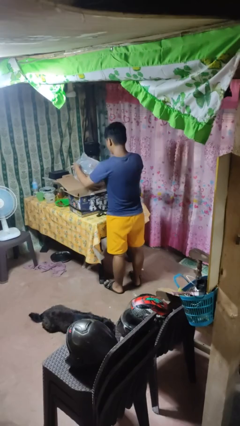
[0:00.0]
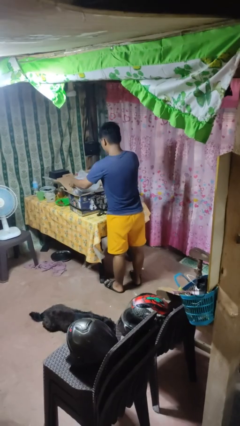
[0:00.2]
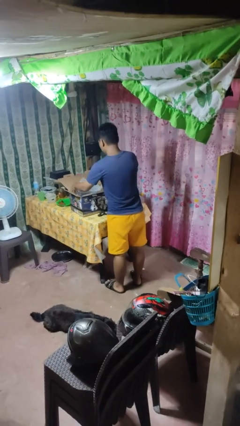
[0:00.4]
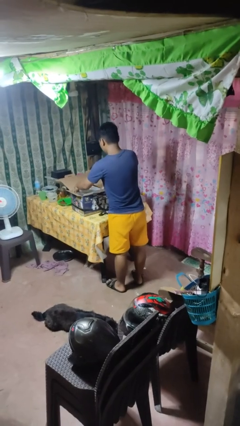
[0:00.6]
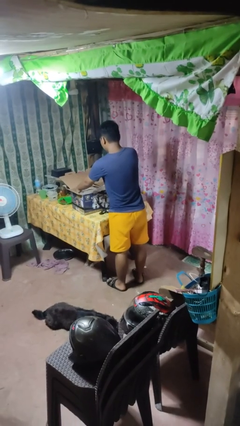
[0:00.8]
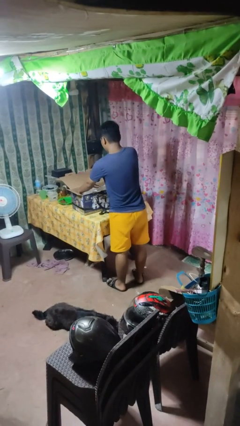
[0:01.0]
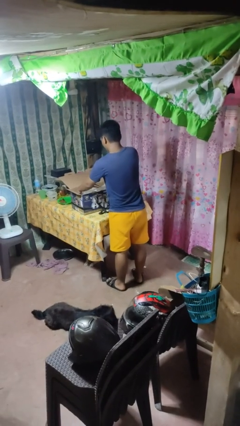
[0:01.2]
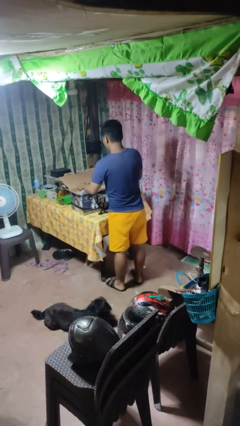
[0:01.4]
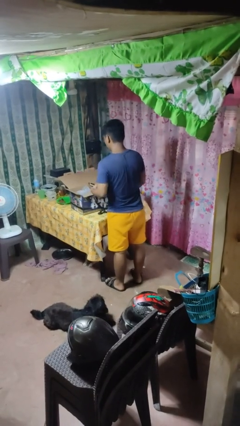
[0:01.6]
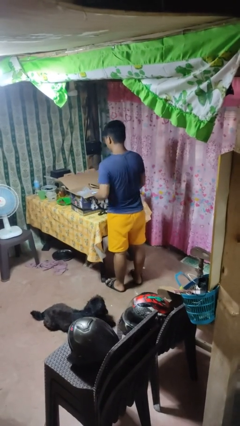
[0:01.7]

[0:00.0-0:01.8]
person puts object into box

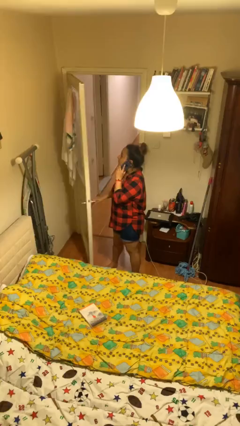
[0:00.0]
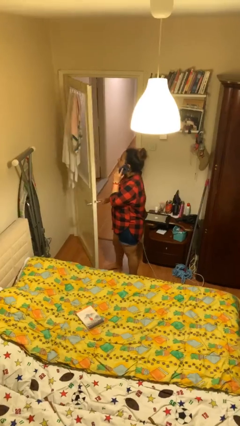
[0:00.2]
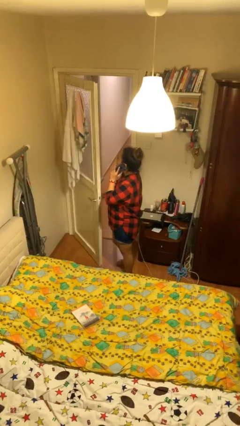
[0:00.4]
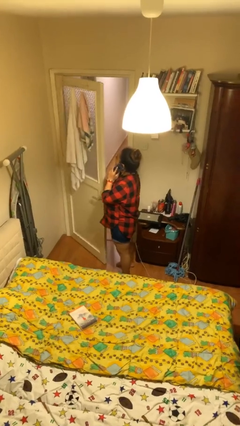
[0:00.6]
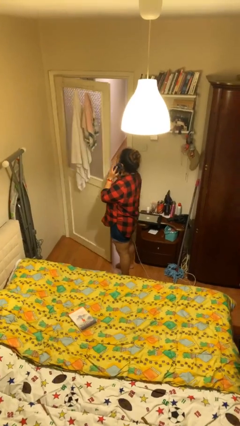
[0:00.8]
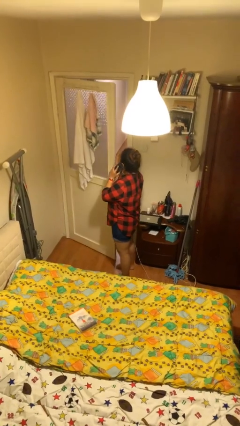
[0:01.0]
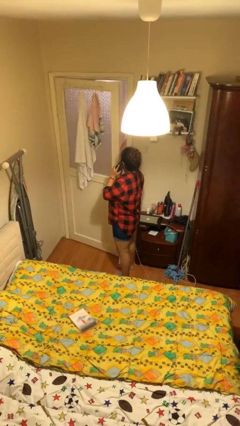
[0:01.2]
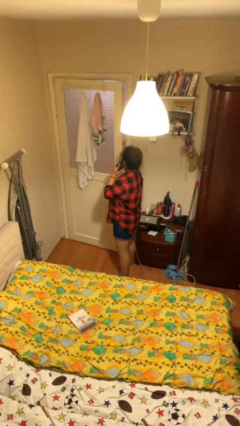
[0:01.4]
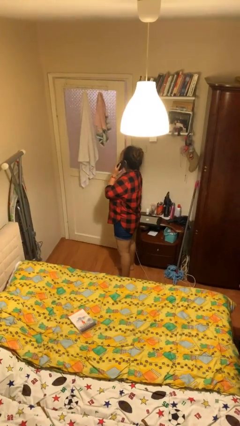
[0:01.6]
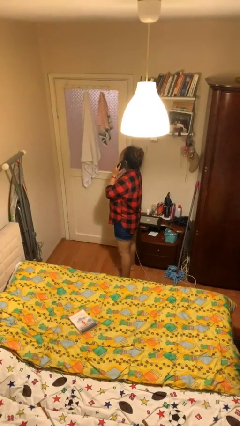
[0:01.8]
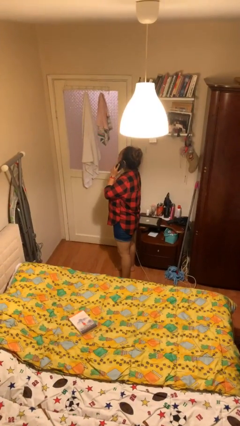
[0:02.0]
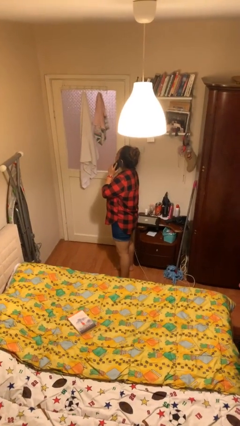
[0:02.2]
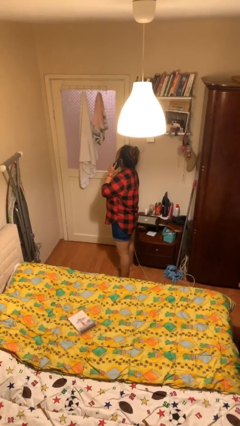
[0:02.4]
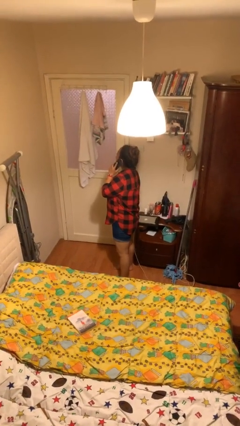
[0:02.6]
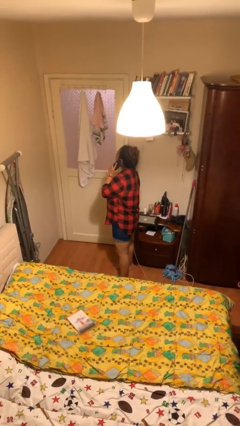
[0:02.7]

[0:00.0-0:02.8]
person closes facility door

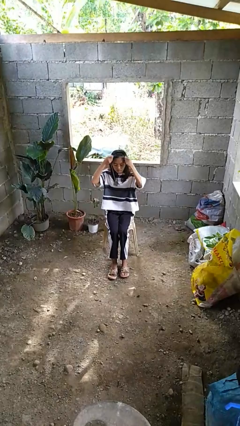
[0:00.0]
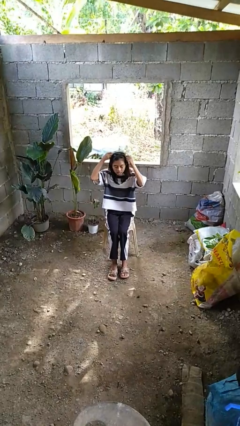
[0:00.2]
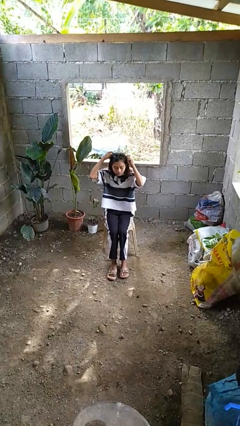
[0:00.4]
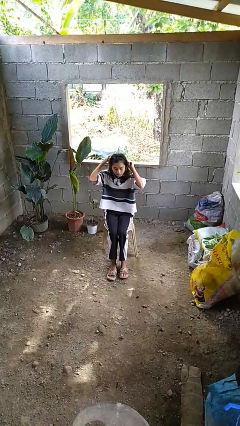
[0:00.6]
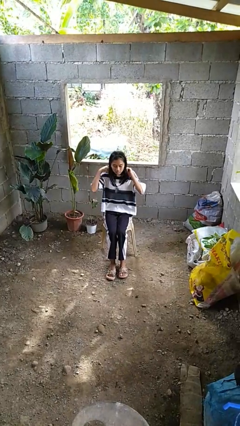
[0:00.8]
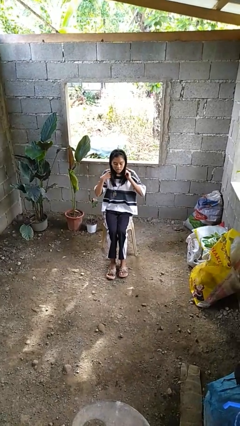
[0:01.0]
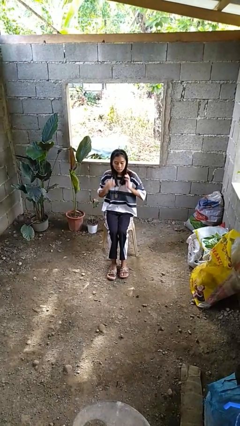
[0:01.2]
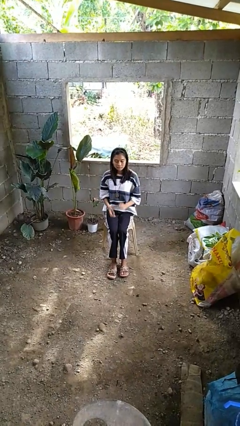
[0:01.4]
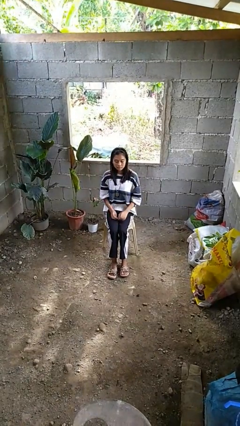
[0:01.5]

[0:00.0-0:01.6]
person puts on necklace

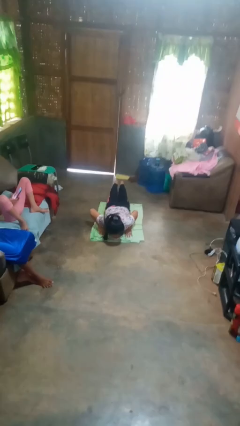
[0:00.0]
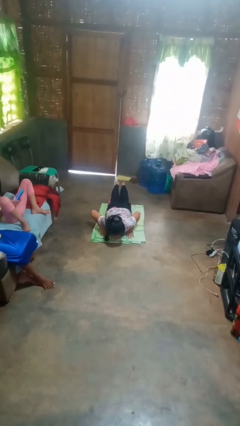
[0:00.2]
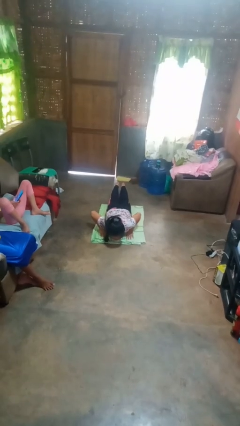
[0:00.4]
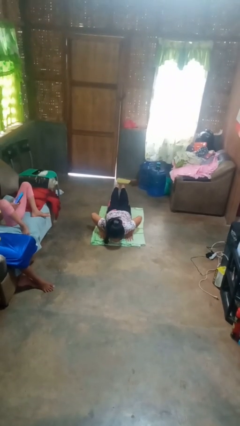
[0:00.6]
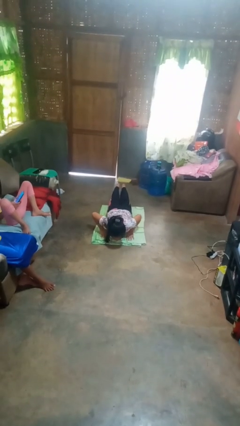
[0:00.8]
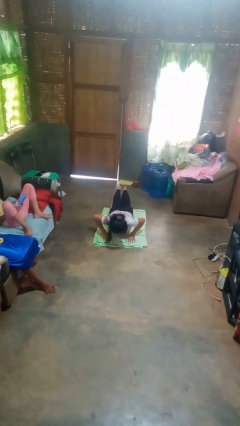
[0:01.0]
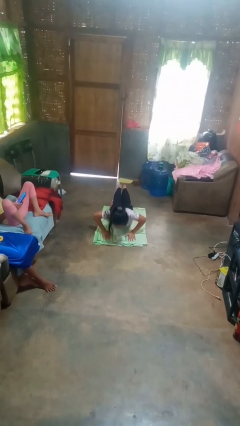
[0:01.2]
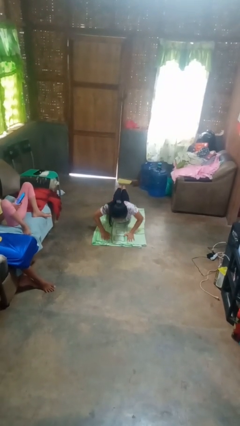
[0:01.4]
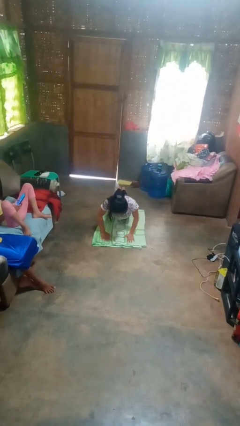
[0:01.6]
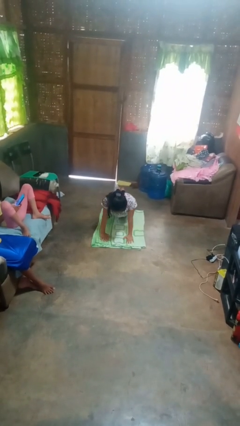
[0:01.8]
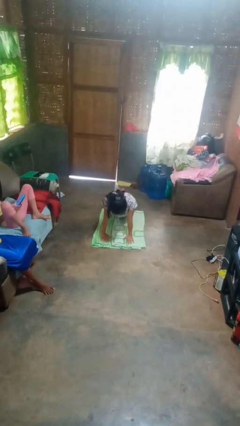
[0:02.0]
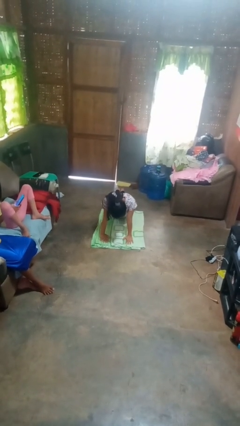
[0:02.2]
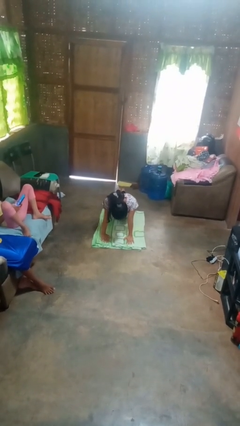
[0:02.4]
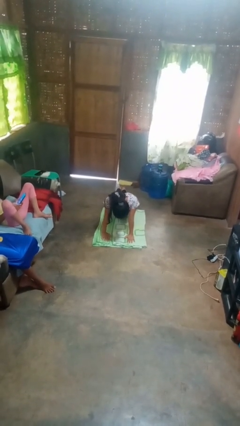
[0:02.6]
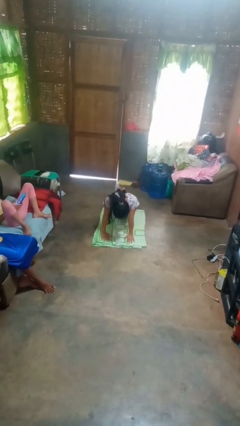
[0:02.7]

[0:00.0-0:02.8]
person exercises with pushup

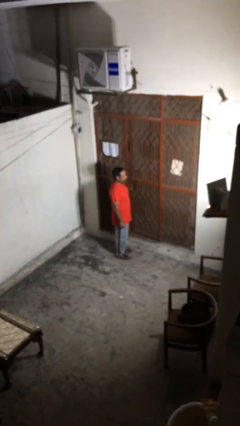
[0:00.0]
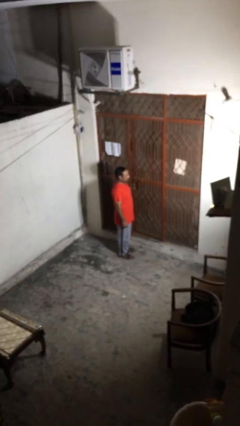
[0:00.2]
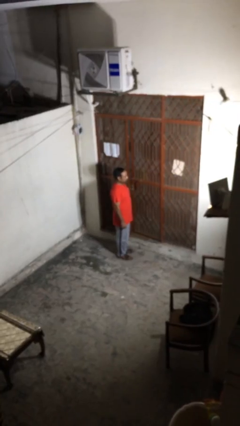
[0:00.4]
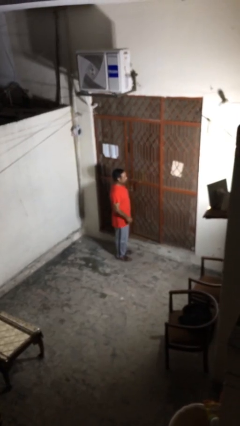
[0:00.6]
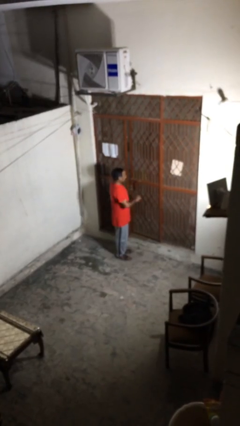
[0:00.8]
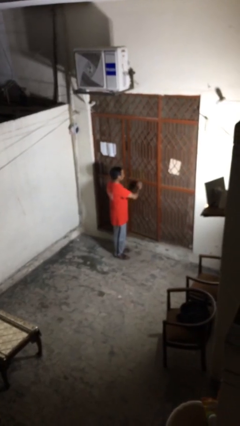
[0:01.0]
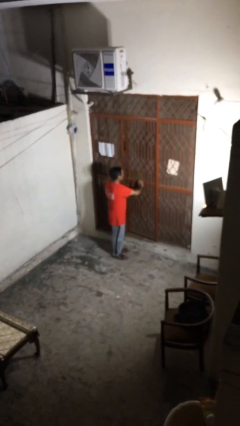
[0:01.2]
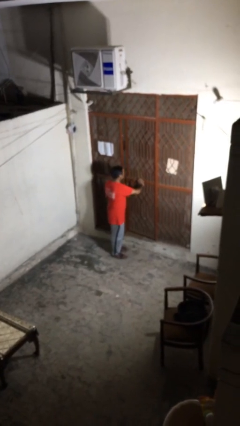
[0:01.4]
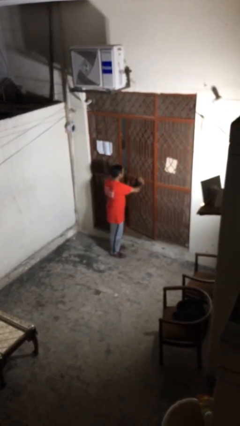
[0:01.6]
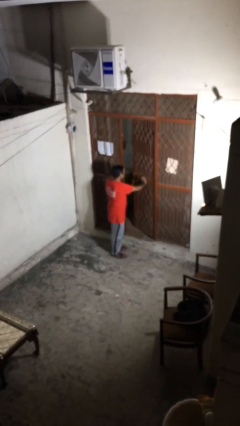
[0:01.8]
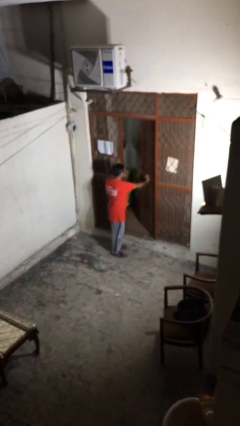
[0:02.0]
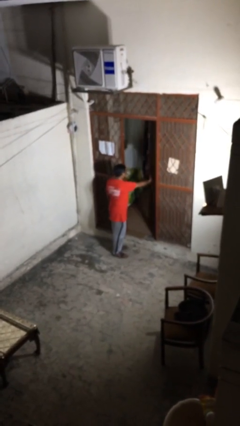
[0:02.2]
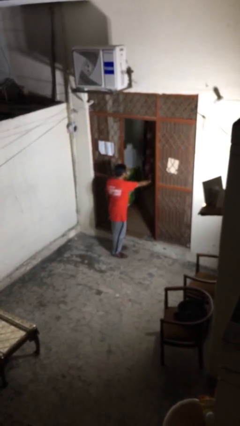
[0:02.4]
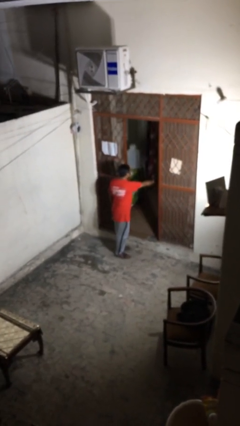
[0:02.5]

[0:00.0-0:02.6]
person opens facility door

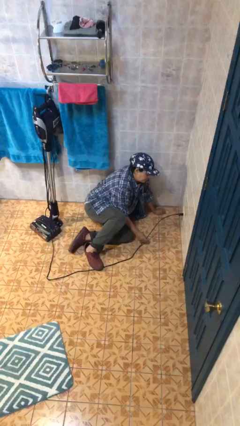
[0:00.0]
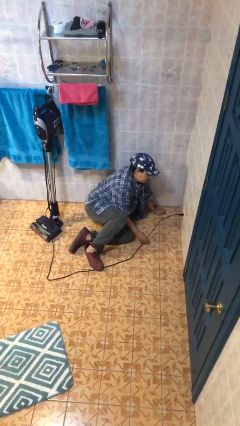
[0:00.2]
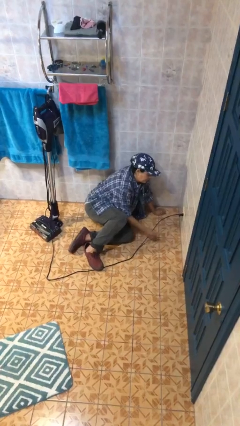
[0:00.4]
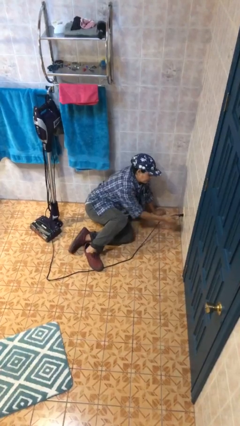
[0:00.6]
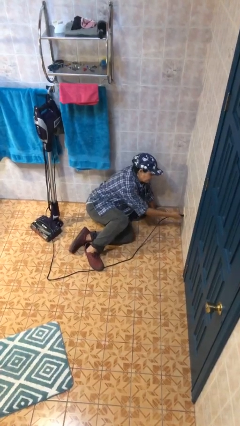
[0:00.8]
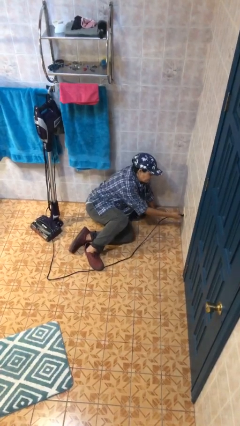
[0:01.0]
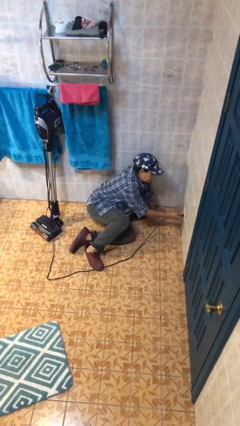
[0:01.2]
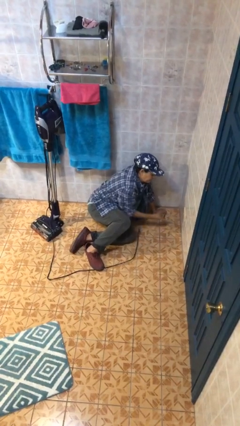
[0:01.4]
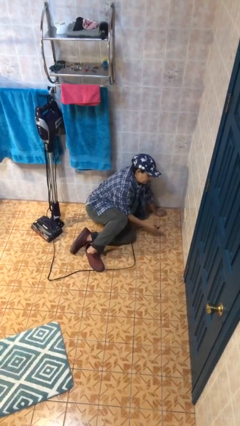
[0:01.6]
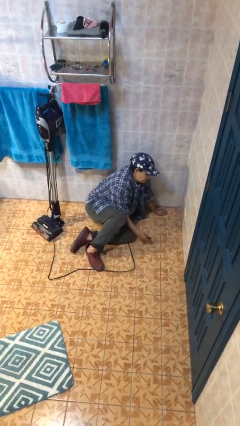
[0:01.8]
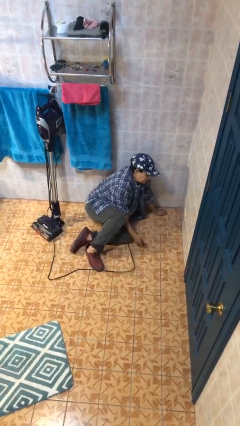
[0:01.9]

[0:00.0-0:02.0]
person unplugs from electrical socket

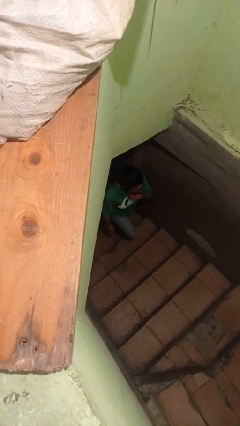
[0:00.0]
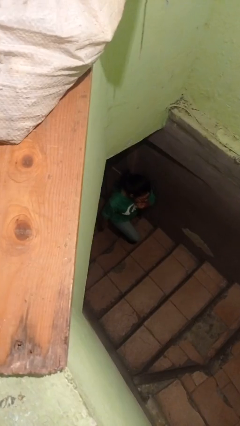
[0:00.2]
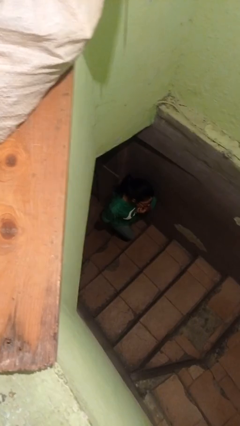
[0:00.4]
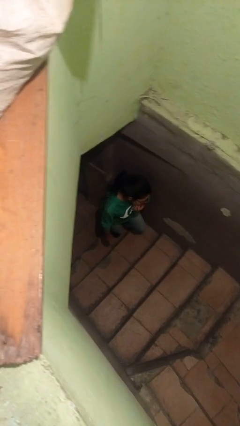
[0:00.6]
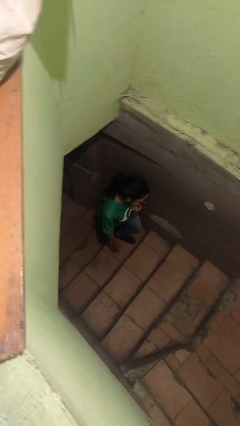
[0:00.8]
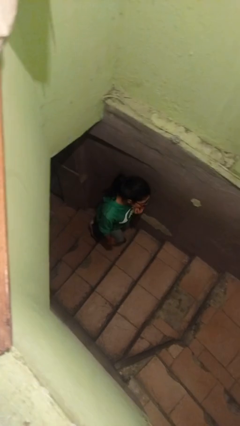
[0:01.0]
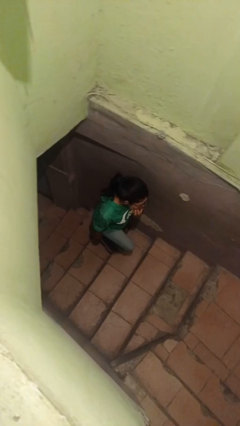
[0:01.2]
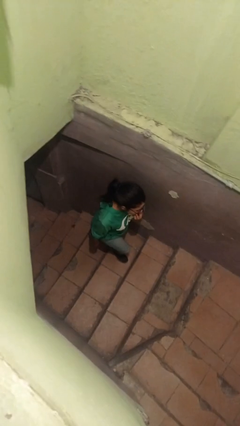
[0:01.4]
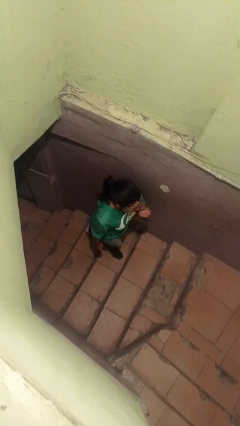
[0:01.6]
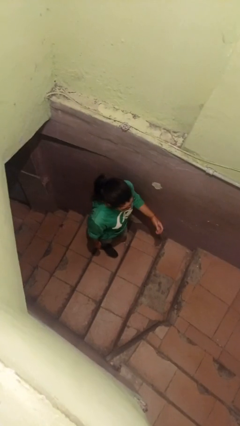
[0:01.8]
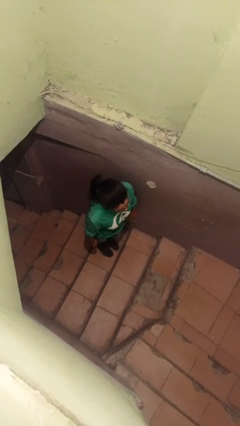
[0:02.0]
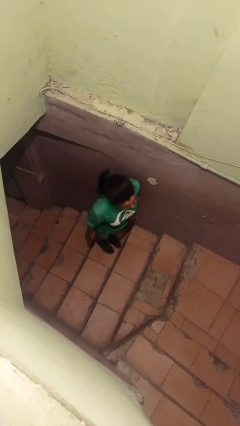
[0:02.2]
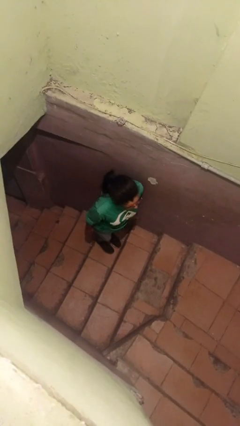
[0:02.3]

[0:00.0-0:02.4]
person climbs up stairs

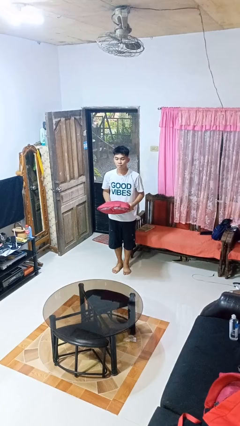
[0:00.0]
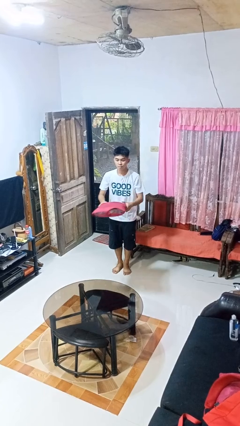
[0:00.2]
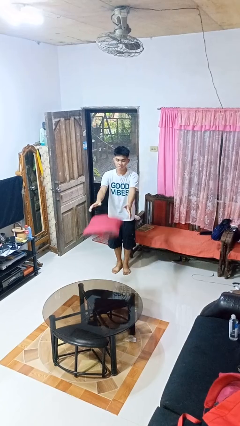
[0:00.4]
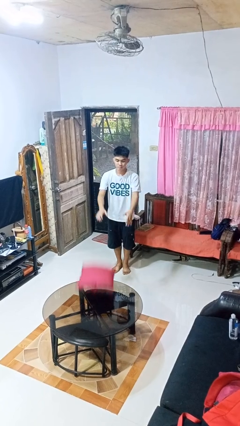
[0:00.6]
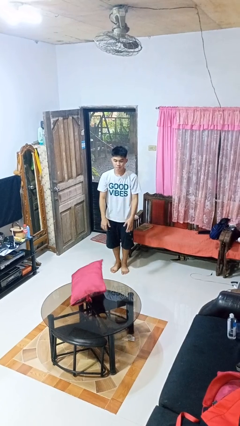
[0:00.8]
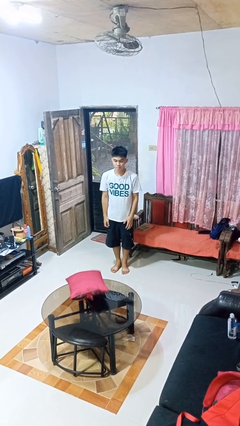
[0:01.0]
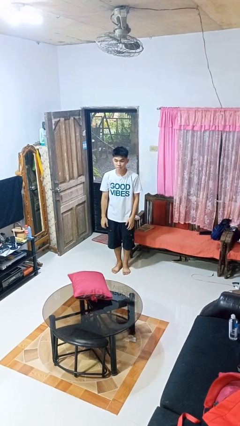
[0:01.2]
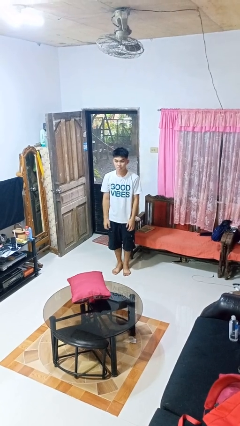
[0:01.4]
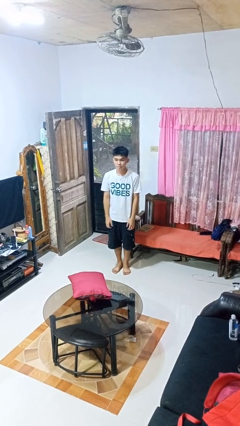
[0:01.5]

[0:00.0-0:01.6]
person throws object on table
